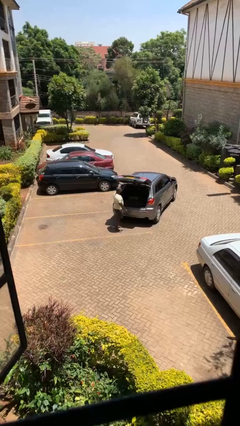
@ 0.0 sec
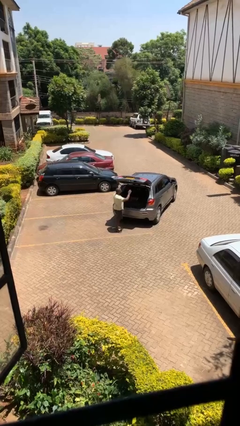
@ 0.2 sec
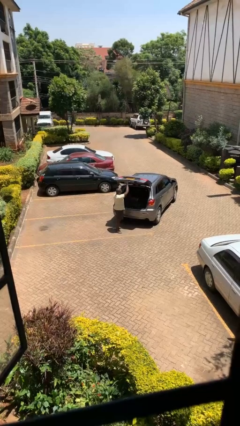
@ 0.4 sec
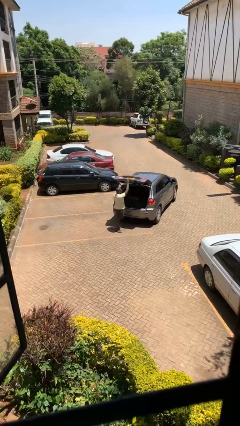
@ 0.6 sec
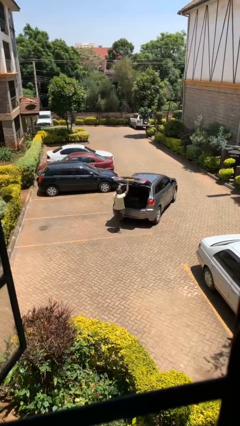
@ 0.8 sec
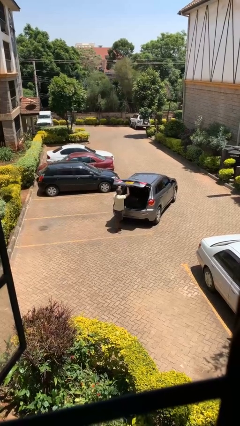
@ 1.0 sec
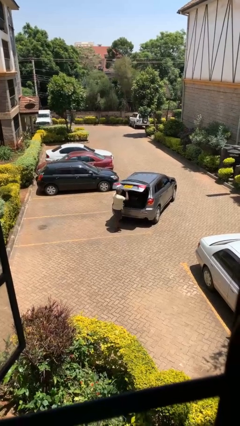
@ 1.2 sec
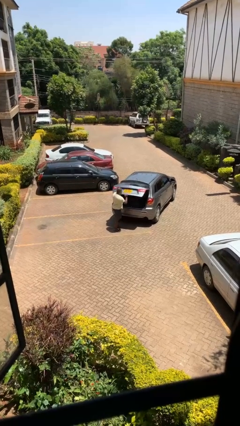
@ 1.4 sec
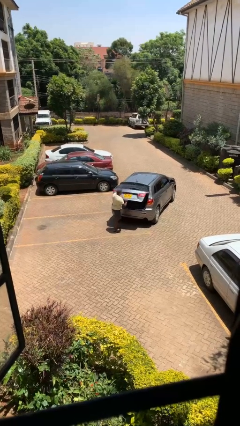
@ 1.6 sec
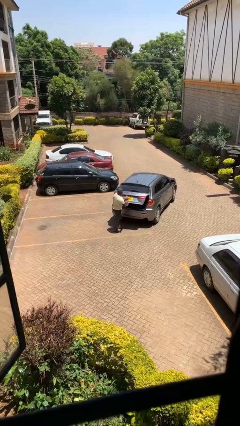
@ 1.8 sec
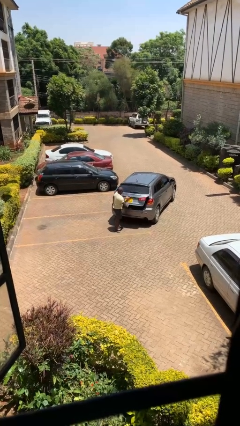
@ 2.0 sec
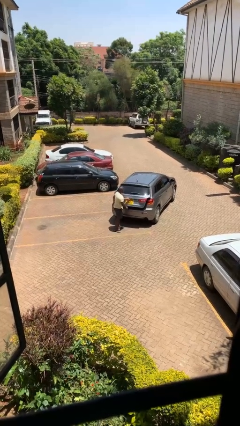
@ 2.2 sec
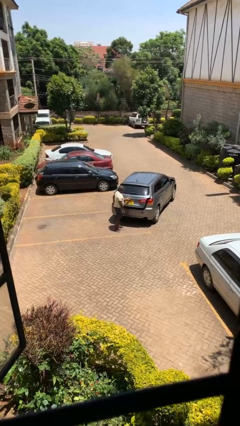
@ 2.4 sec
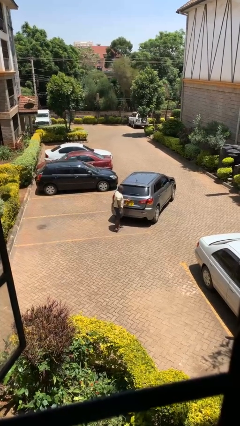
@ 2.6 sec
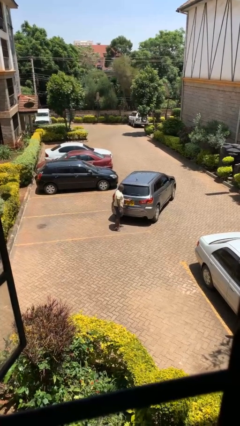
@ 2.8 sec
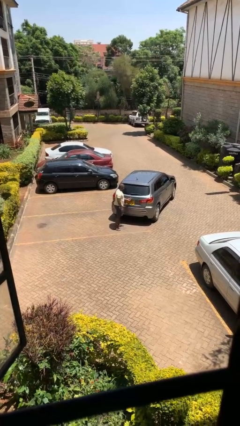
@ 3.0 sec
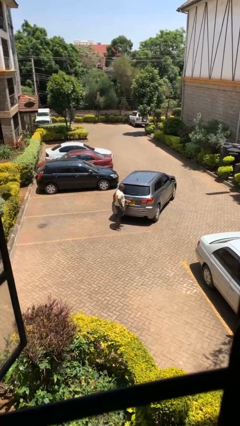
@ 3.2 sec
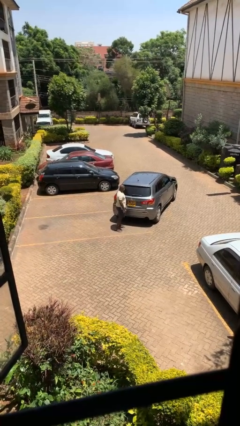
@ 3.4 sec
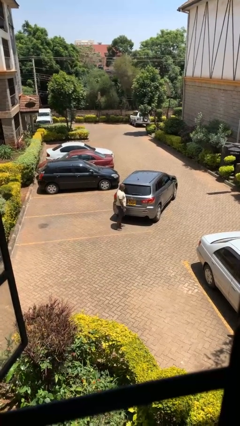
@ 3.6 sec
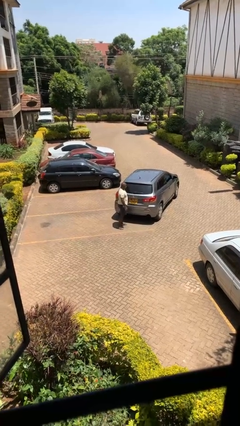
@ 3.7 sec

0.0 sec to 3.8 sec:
person closes car trunk

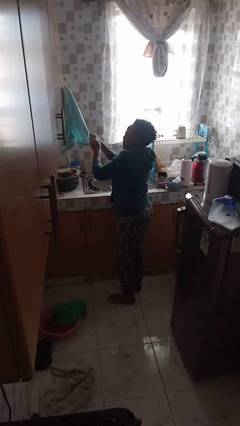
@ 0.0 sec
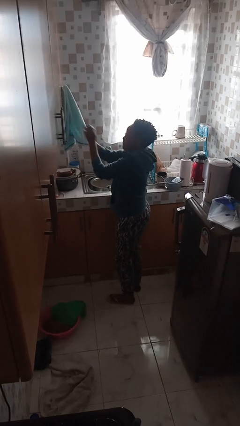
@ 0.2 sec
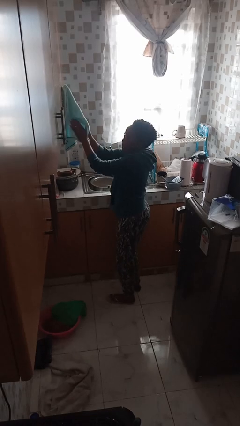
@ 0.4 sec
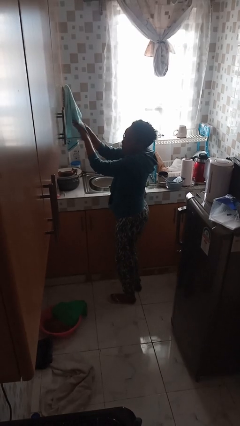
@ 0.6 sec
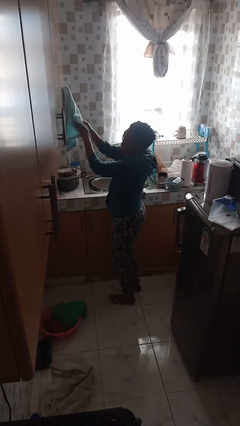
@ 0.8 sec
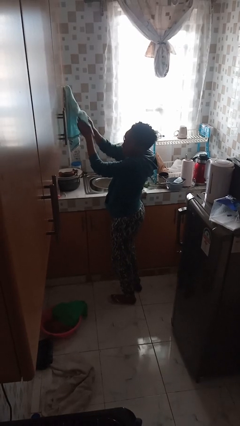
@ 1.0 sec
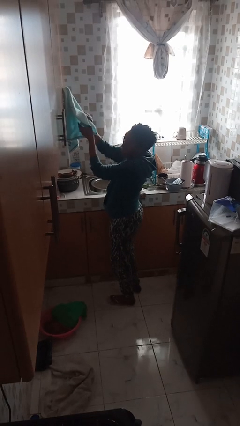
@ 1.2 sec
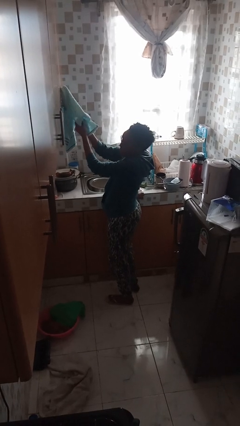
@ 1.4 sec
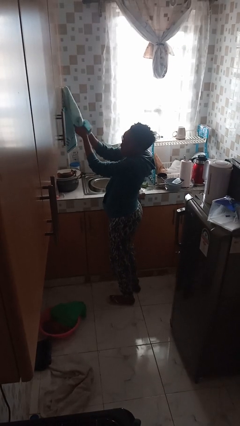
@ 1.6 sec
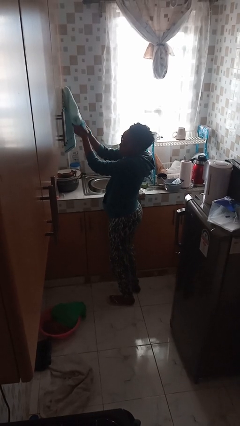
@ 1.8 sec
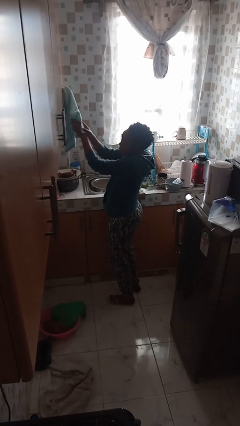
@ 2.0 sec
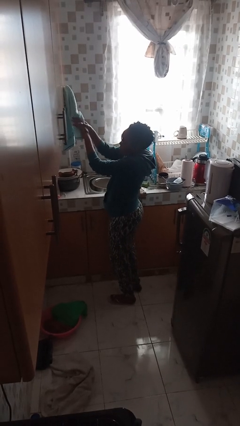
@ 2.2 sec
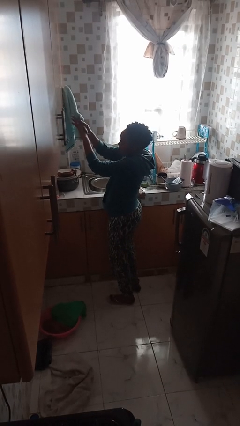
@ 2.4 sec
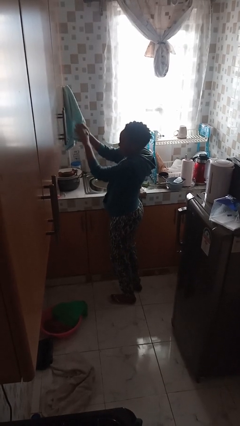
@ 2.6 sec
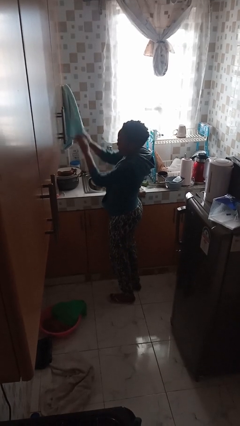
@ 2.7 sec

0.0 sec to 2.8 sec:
person dries hands with towel

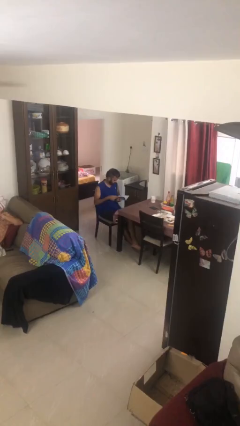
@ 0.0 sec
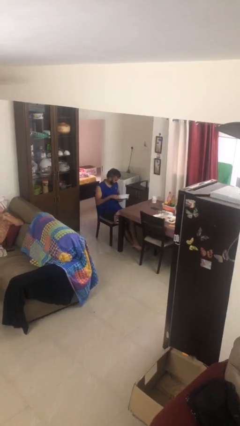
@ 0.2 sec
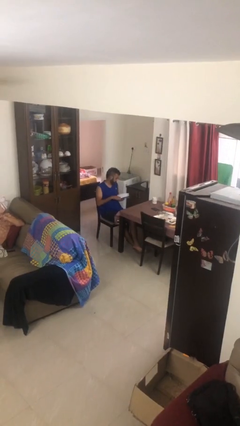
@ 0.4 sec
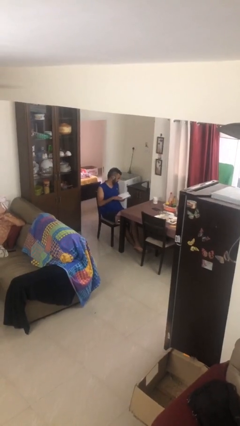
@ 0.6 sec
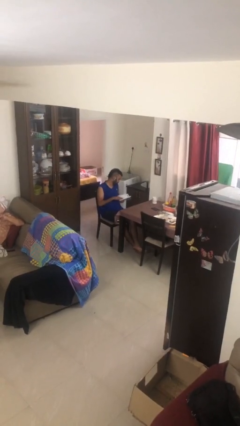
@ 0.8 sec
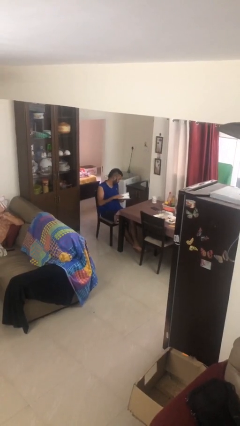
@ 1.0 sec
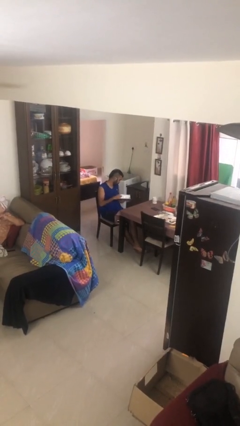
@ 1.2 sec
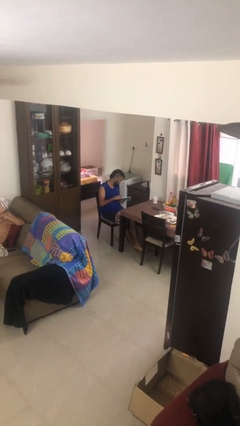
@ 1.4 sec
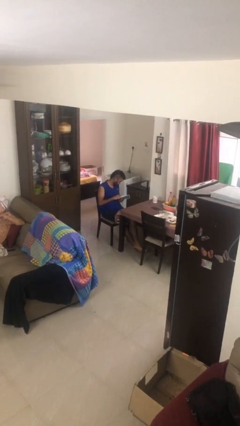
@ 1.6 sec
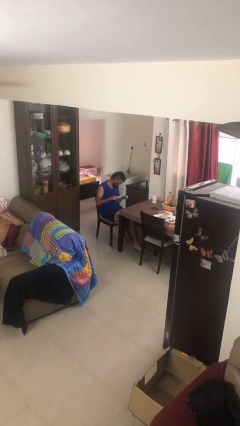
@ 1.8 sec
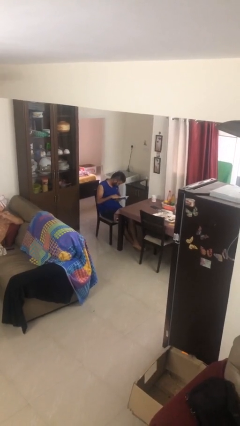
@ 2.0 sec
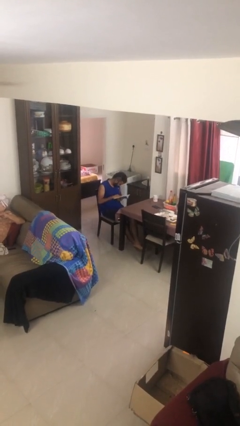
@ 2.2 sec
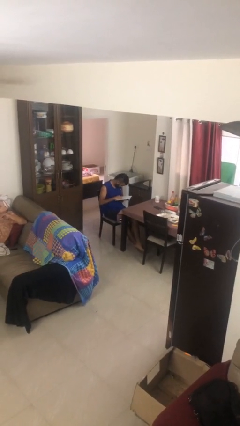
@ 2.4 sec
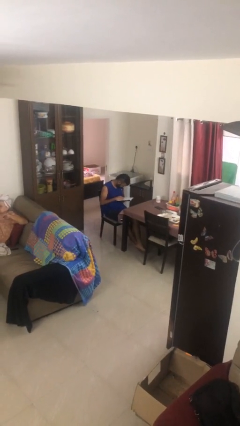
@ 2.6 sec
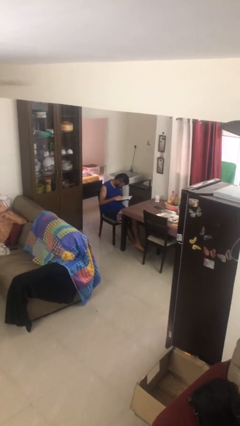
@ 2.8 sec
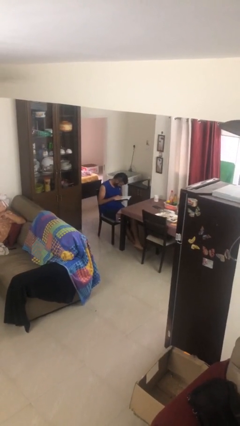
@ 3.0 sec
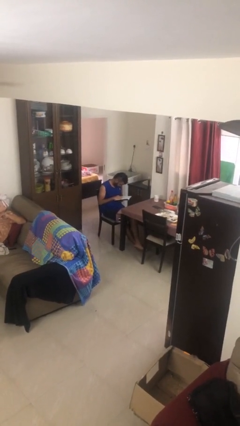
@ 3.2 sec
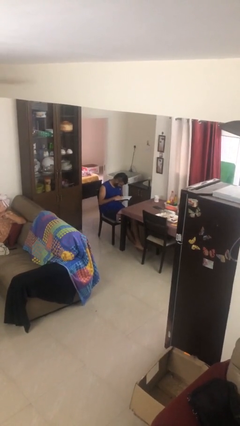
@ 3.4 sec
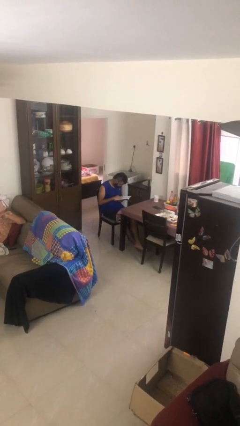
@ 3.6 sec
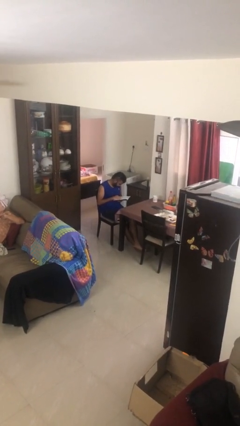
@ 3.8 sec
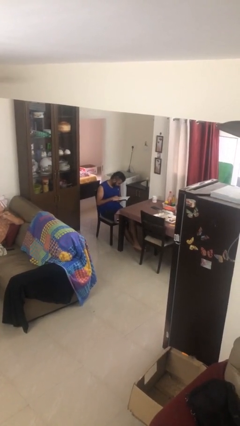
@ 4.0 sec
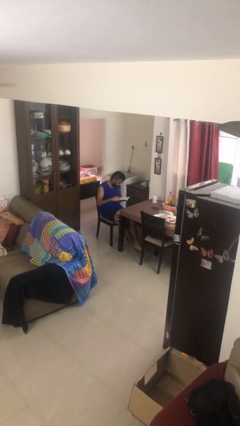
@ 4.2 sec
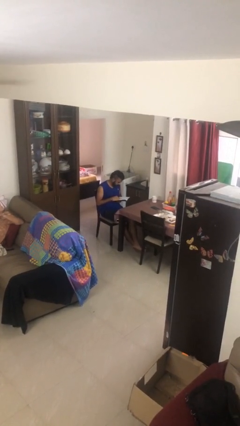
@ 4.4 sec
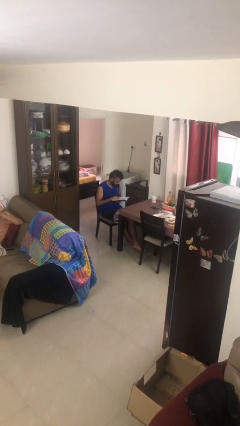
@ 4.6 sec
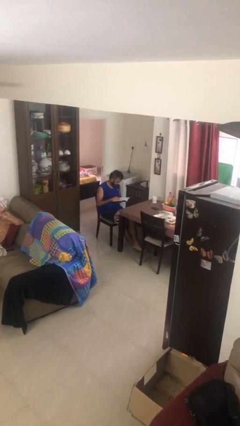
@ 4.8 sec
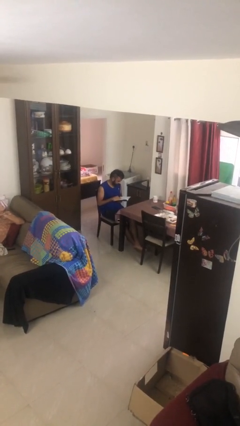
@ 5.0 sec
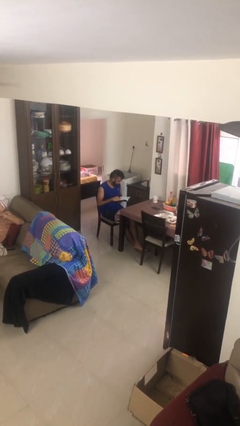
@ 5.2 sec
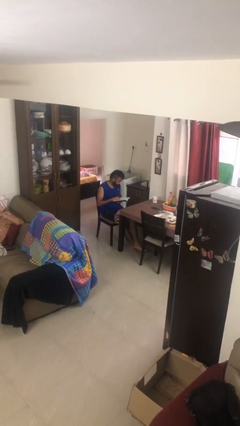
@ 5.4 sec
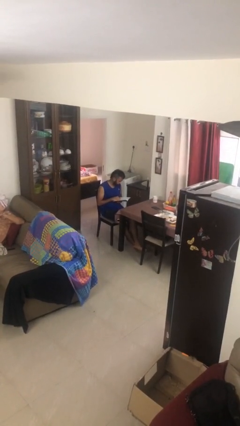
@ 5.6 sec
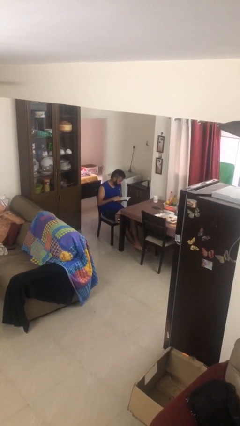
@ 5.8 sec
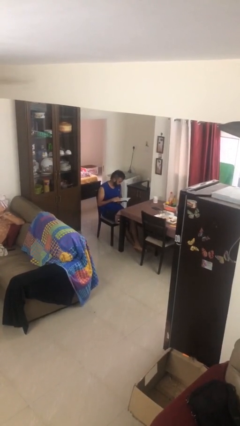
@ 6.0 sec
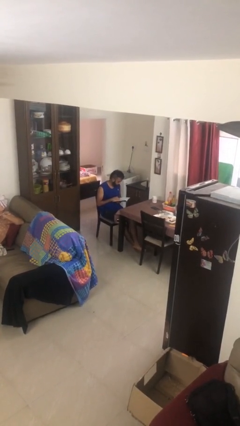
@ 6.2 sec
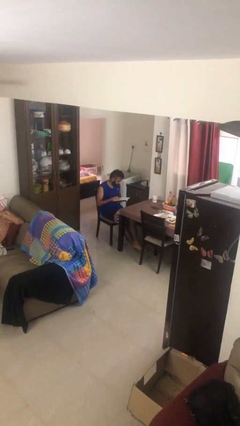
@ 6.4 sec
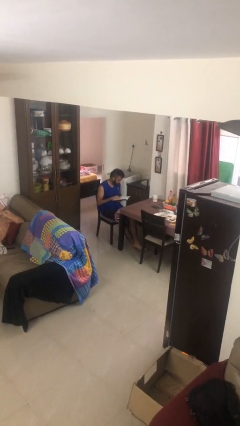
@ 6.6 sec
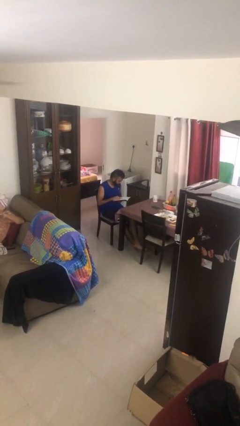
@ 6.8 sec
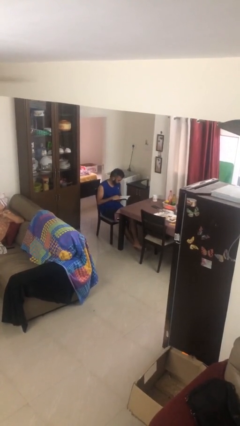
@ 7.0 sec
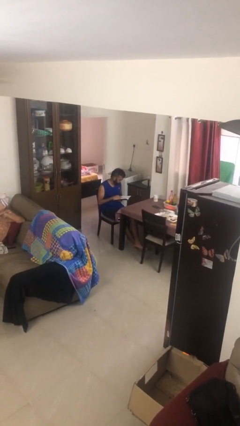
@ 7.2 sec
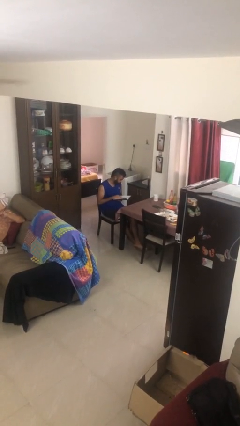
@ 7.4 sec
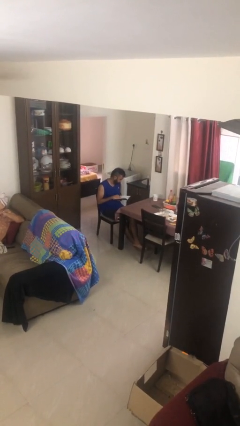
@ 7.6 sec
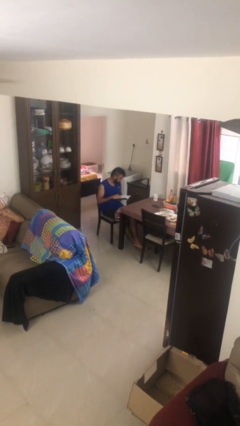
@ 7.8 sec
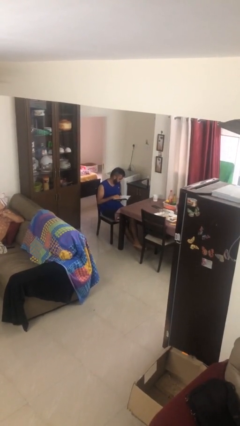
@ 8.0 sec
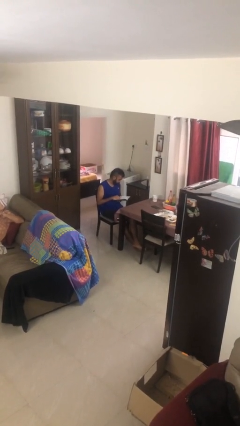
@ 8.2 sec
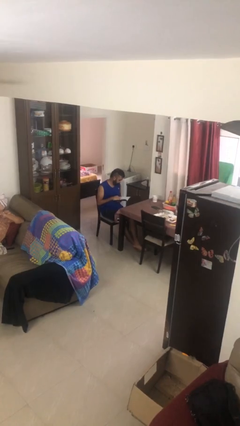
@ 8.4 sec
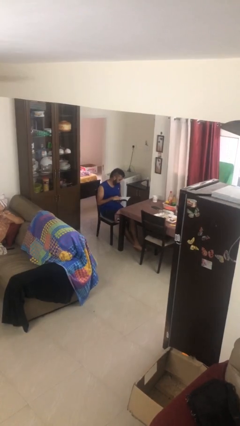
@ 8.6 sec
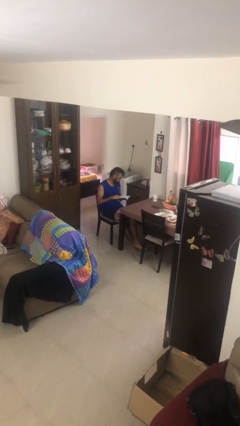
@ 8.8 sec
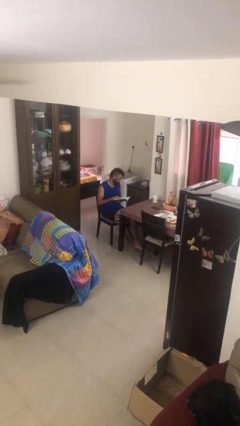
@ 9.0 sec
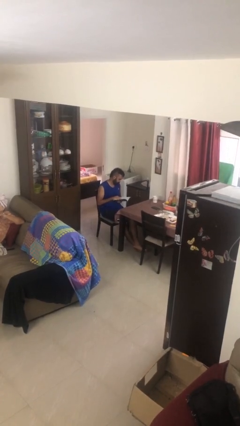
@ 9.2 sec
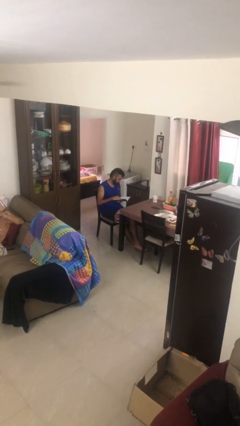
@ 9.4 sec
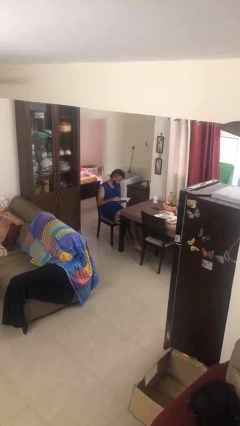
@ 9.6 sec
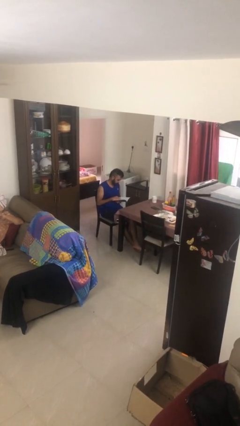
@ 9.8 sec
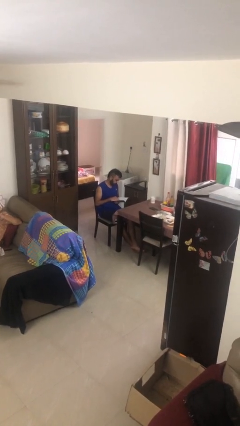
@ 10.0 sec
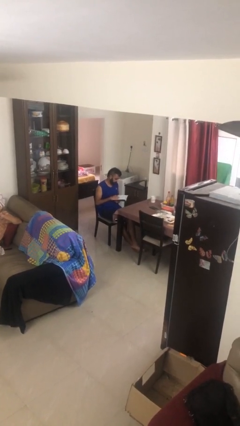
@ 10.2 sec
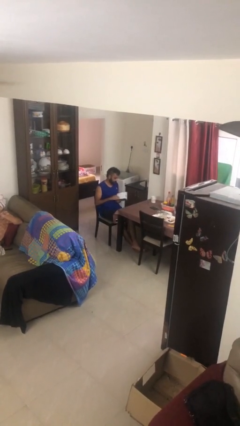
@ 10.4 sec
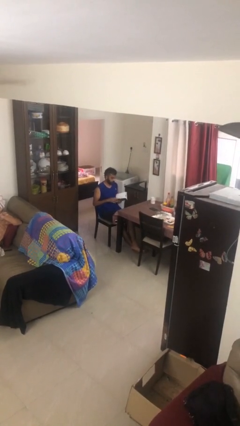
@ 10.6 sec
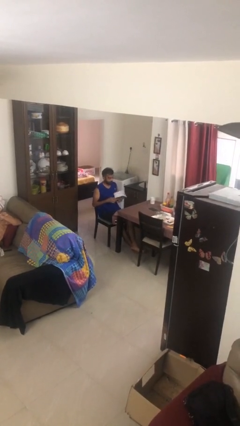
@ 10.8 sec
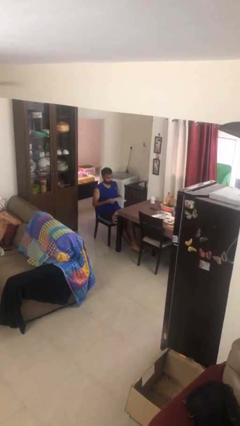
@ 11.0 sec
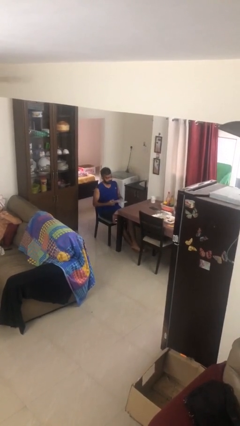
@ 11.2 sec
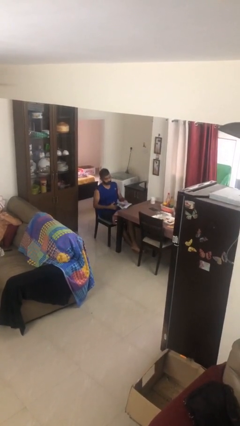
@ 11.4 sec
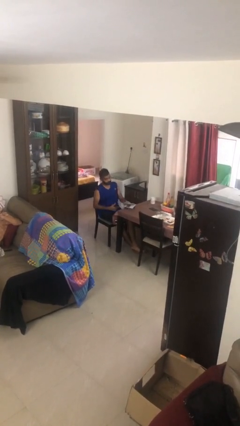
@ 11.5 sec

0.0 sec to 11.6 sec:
person reads document
